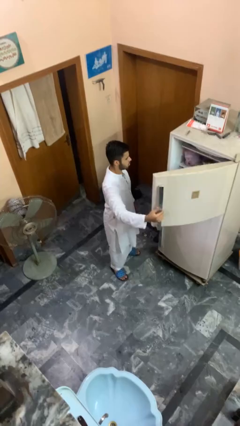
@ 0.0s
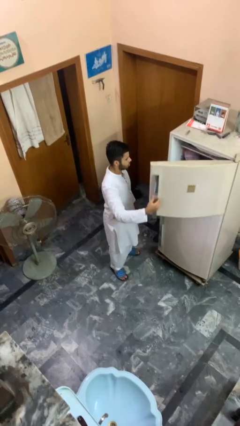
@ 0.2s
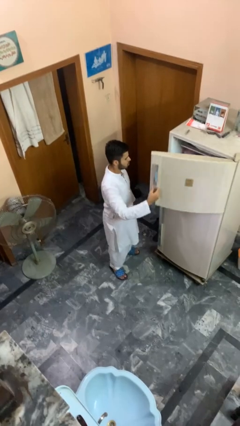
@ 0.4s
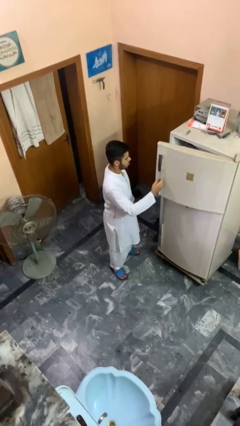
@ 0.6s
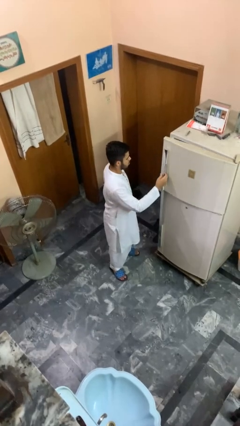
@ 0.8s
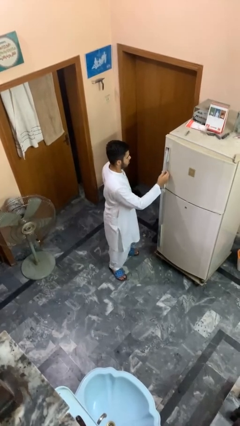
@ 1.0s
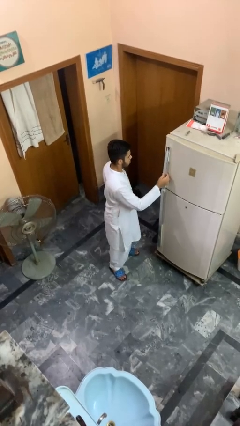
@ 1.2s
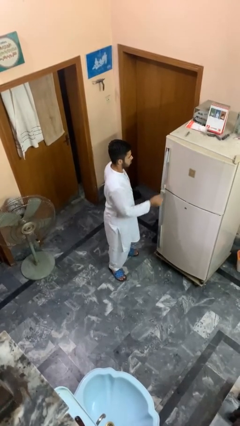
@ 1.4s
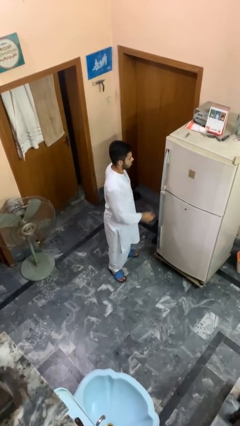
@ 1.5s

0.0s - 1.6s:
person closes refrigerator

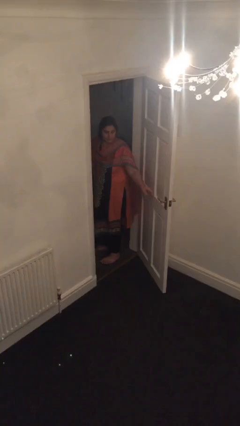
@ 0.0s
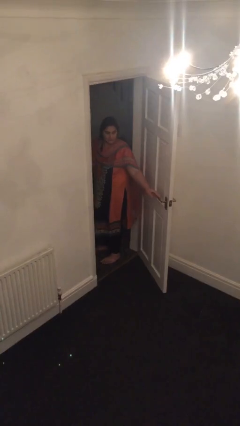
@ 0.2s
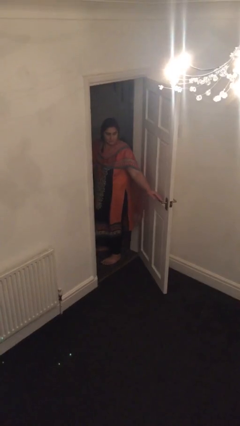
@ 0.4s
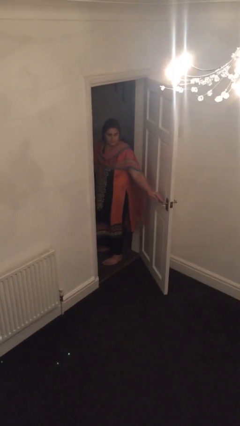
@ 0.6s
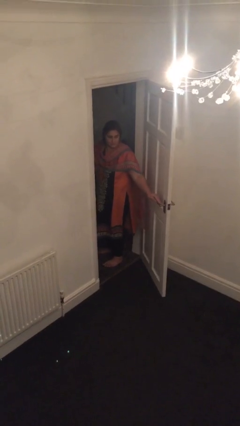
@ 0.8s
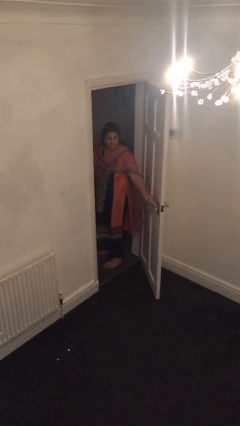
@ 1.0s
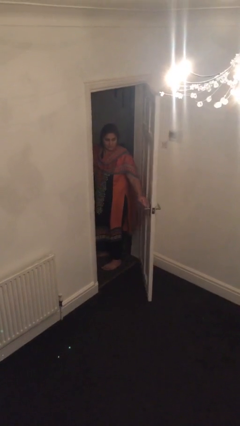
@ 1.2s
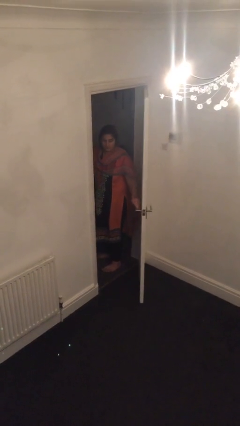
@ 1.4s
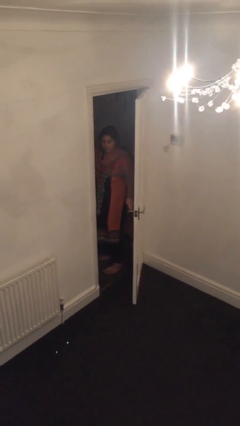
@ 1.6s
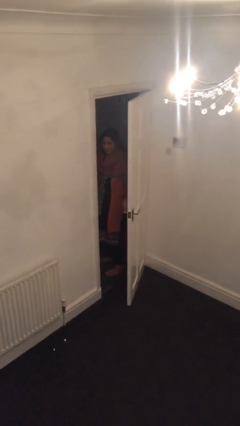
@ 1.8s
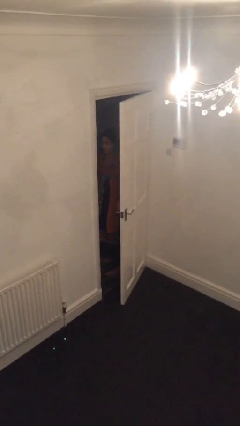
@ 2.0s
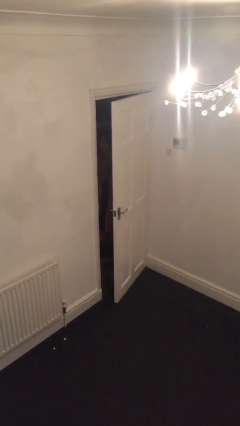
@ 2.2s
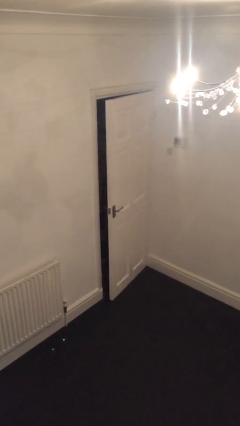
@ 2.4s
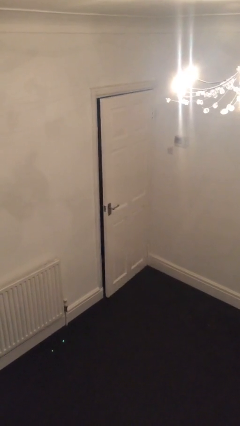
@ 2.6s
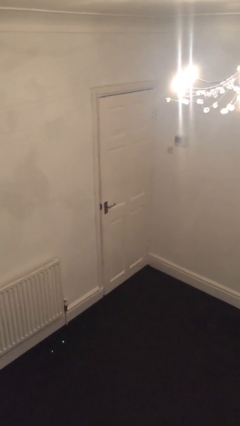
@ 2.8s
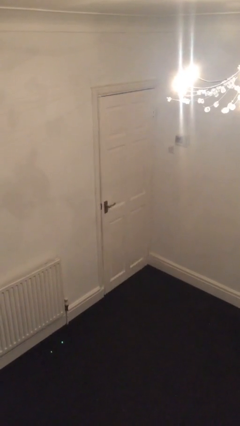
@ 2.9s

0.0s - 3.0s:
person closes facility door

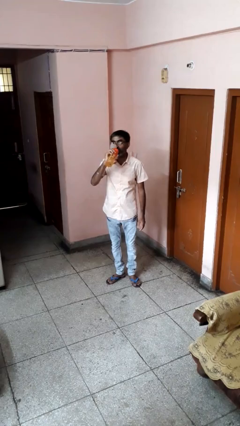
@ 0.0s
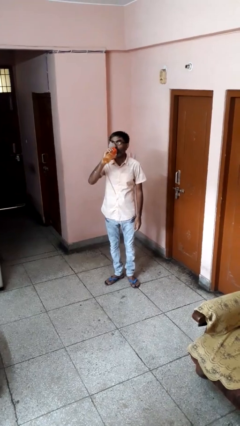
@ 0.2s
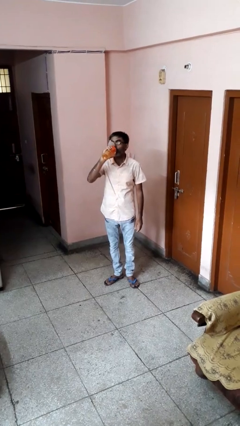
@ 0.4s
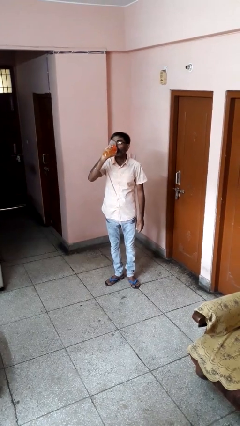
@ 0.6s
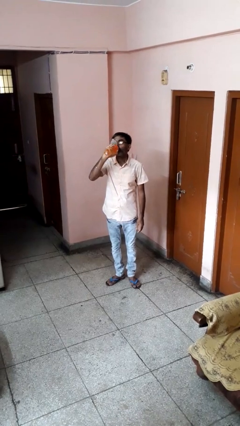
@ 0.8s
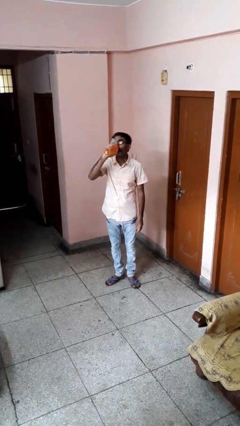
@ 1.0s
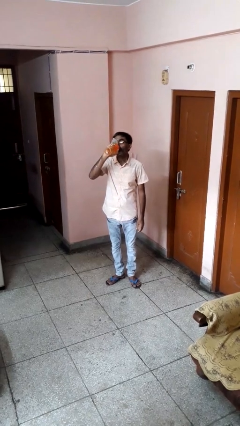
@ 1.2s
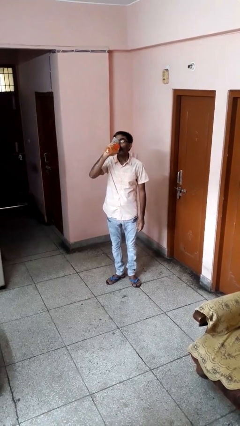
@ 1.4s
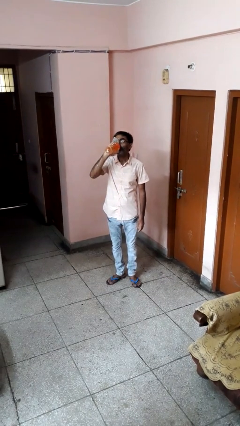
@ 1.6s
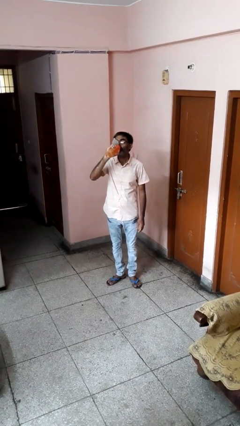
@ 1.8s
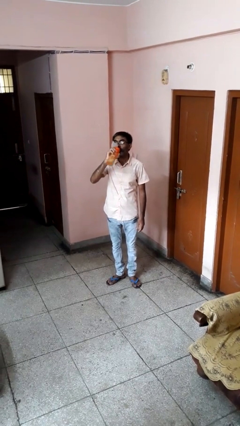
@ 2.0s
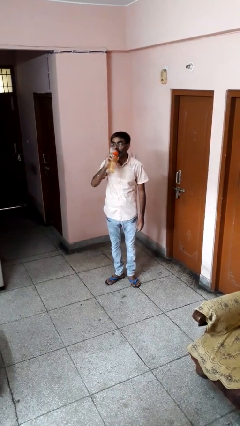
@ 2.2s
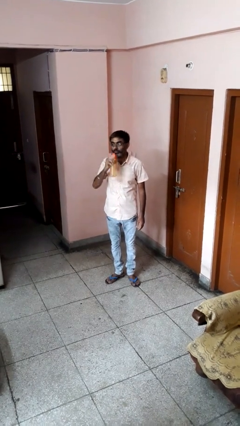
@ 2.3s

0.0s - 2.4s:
person drinks from bottle

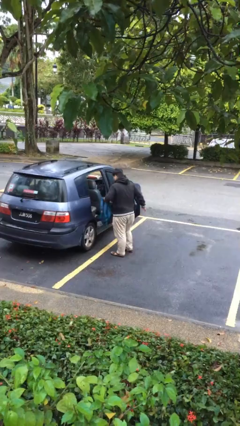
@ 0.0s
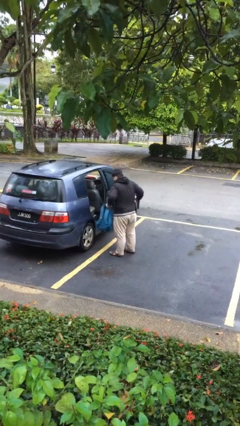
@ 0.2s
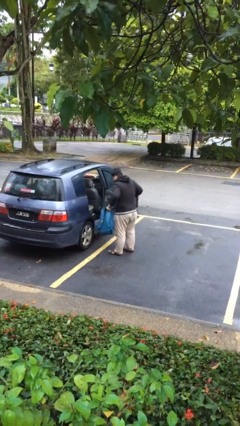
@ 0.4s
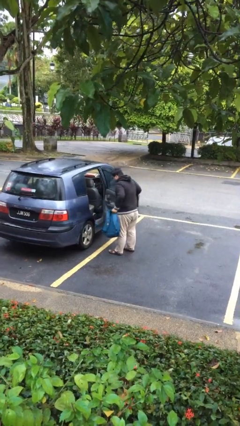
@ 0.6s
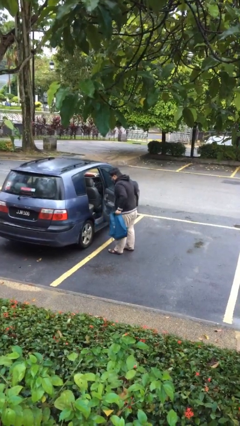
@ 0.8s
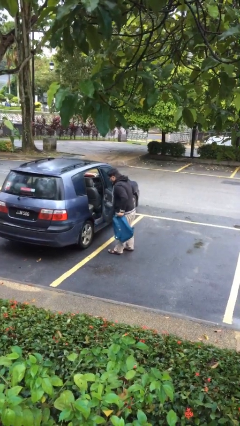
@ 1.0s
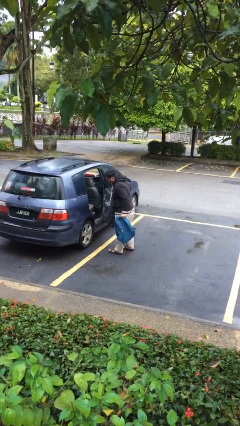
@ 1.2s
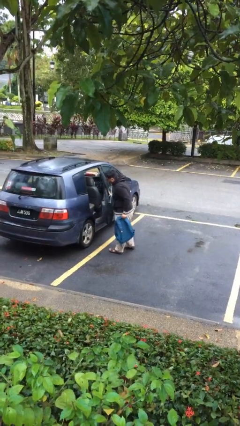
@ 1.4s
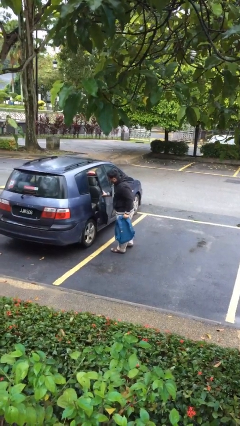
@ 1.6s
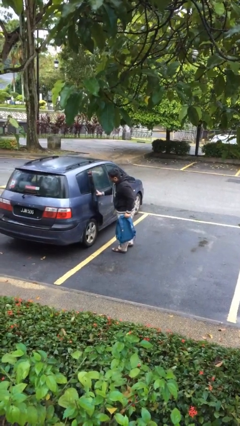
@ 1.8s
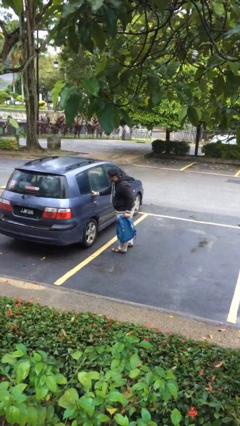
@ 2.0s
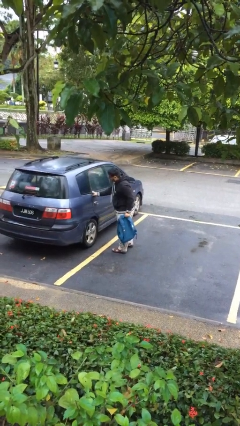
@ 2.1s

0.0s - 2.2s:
person closes car door

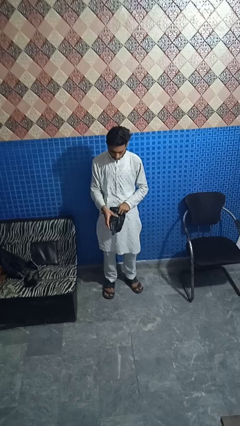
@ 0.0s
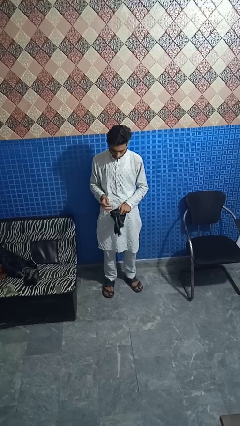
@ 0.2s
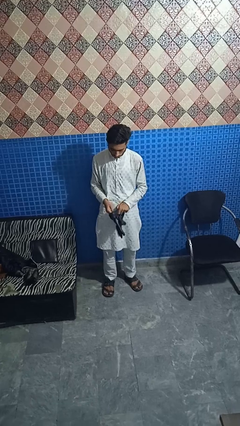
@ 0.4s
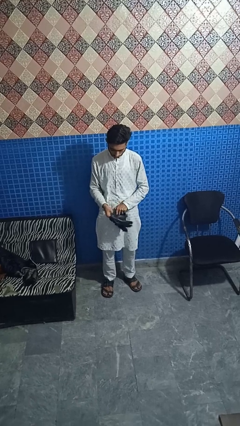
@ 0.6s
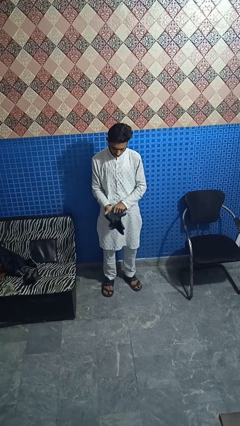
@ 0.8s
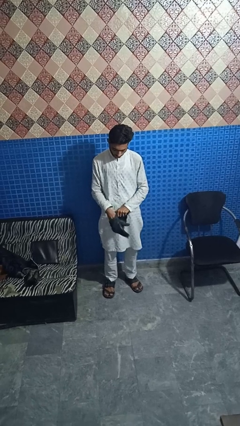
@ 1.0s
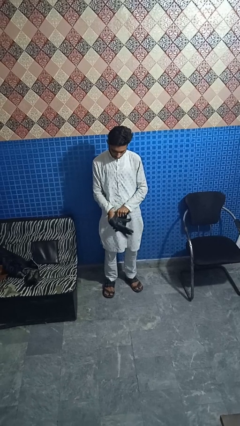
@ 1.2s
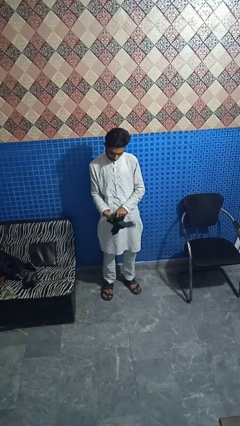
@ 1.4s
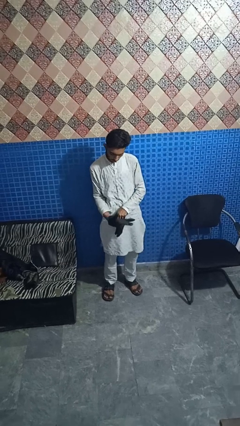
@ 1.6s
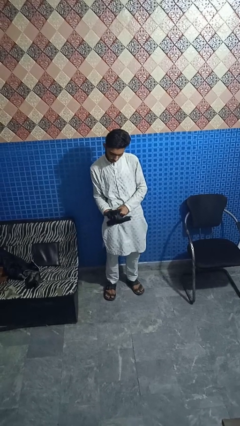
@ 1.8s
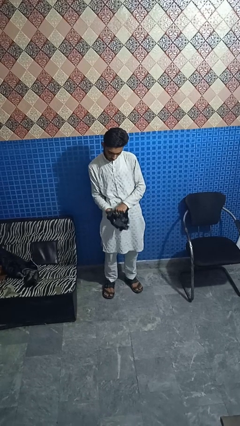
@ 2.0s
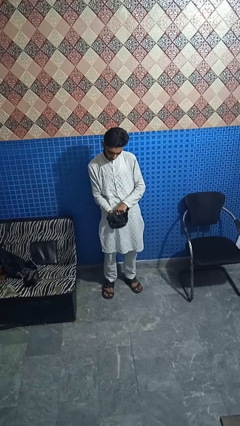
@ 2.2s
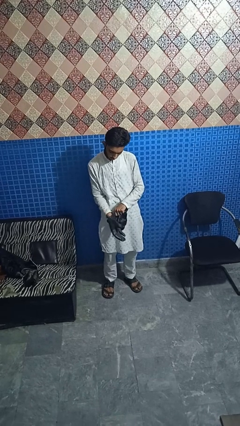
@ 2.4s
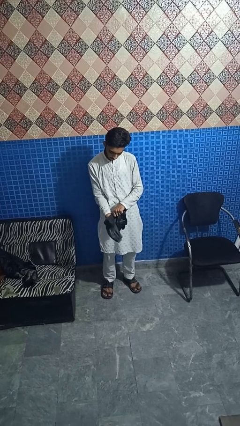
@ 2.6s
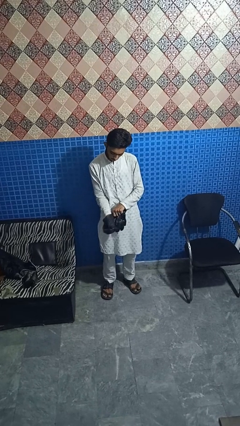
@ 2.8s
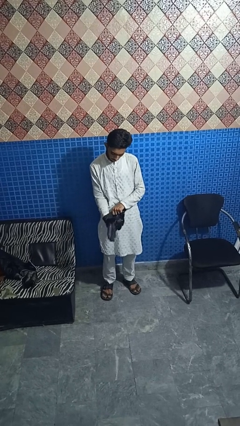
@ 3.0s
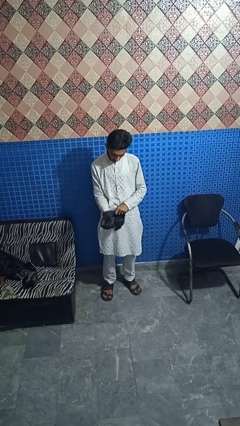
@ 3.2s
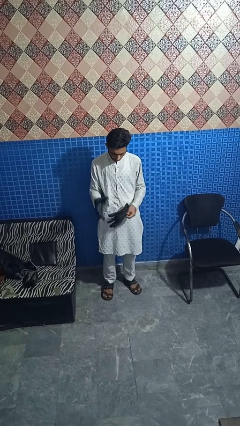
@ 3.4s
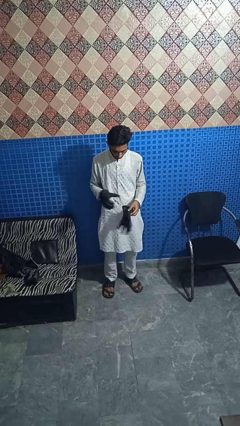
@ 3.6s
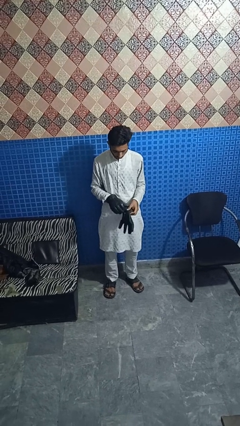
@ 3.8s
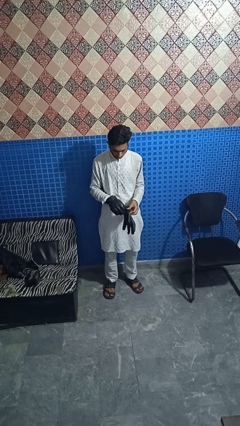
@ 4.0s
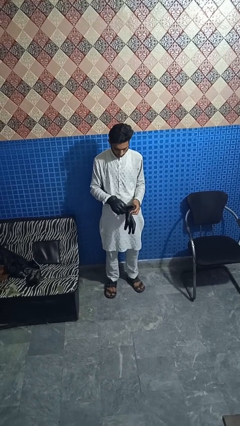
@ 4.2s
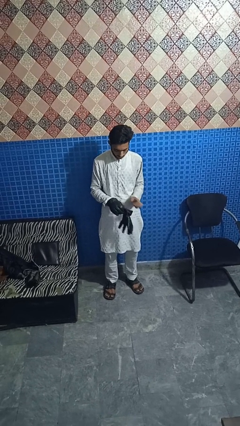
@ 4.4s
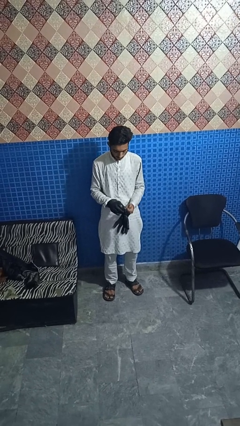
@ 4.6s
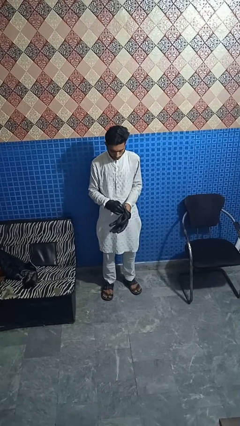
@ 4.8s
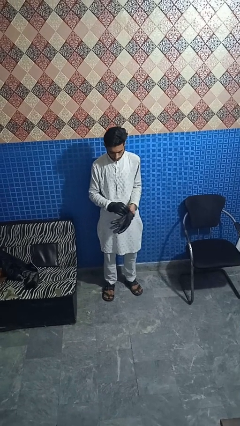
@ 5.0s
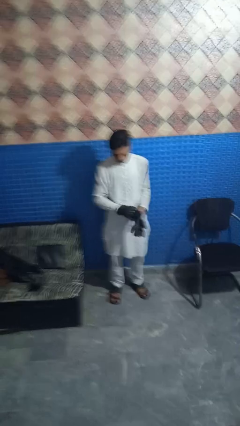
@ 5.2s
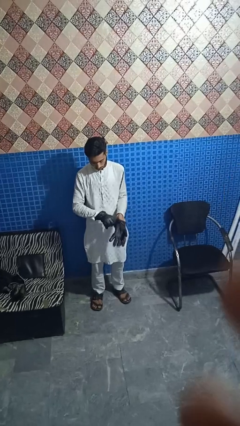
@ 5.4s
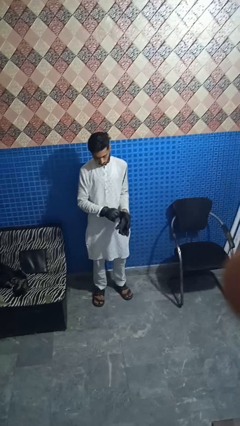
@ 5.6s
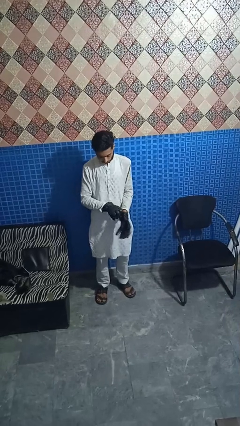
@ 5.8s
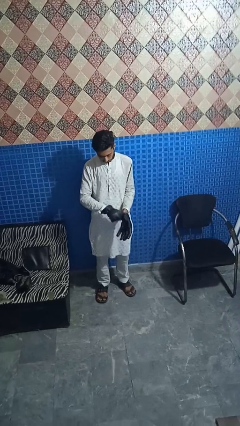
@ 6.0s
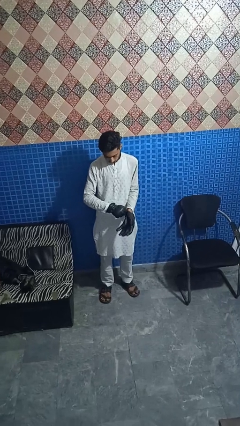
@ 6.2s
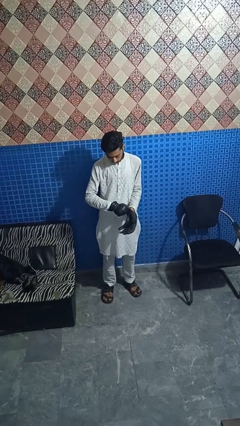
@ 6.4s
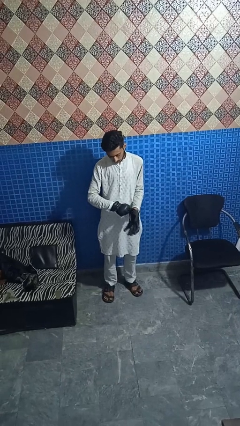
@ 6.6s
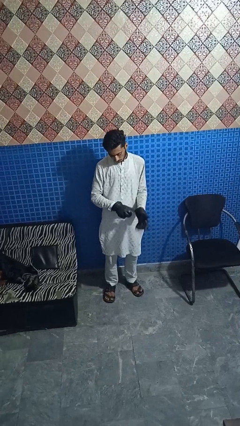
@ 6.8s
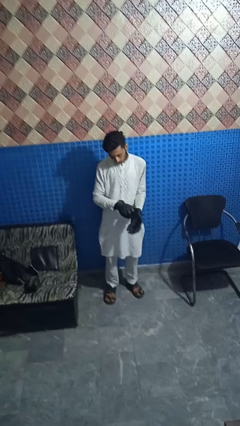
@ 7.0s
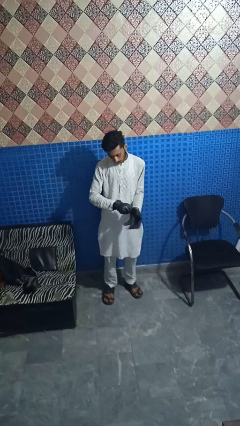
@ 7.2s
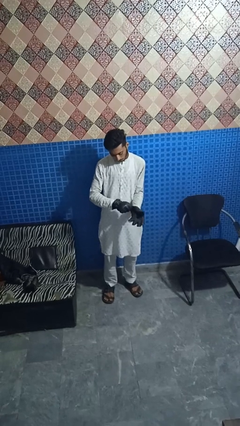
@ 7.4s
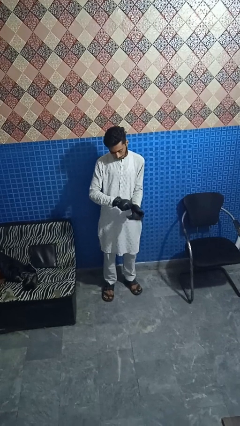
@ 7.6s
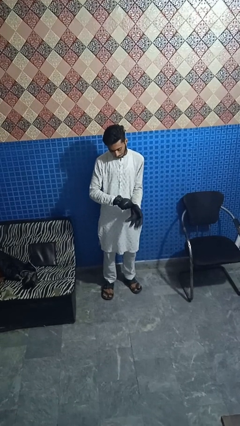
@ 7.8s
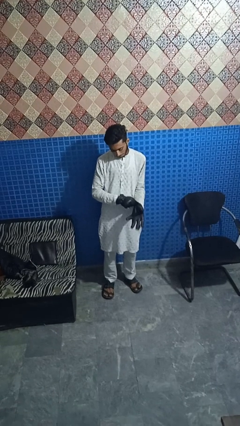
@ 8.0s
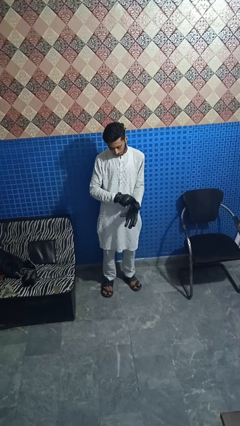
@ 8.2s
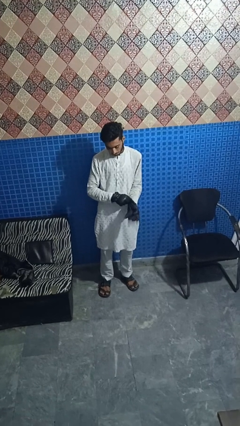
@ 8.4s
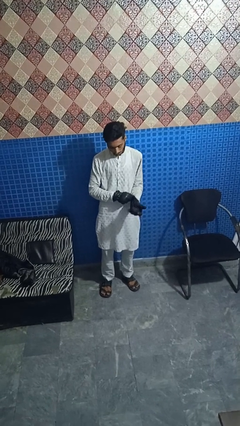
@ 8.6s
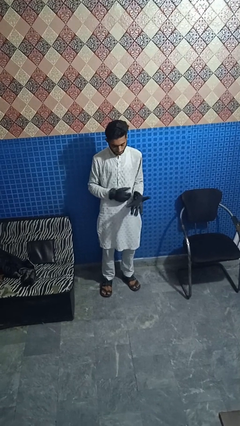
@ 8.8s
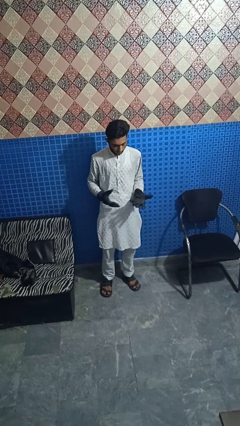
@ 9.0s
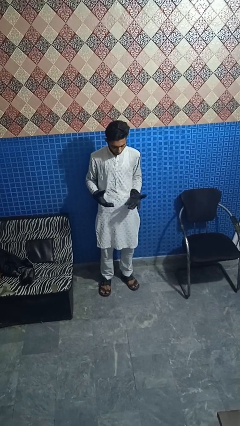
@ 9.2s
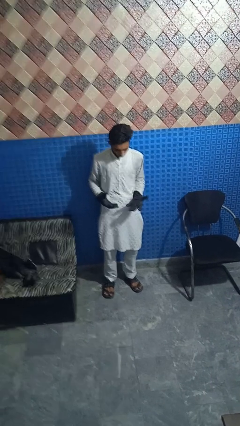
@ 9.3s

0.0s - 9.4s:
person puts on gloves
